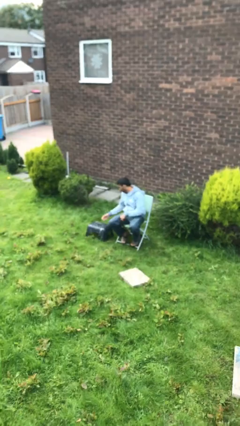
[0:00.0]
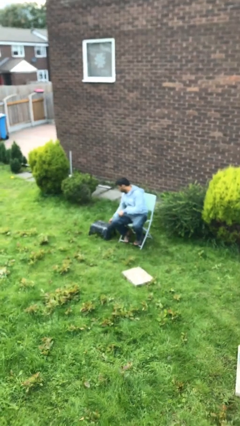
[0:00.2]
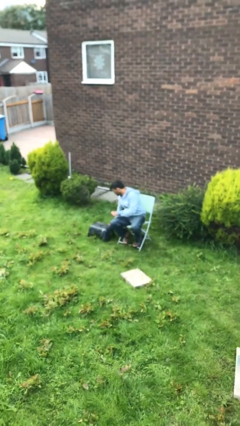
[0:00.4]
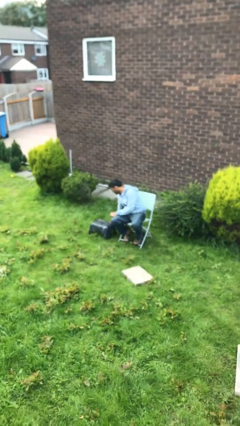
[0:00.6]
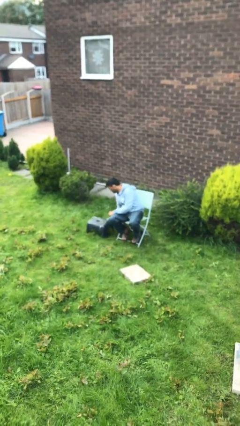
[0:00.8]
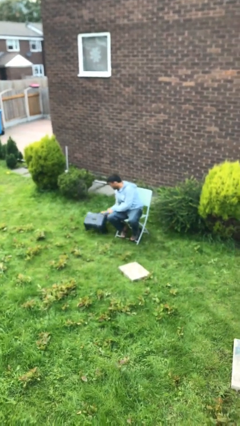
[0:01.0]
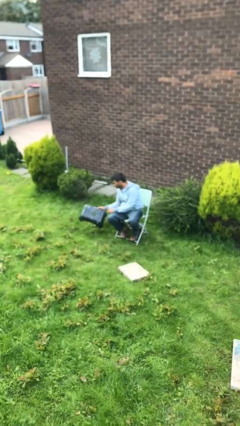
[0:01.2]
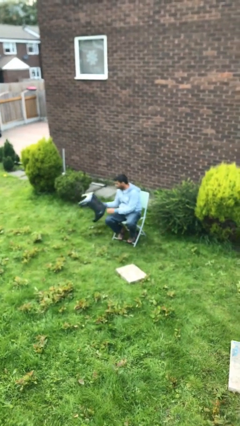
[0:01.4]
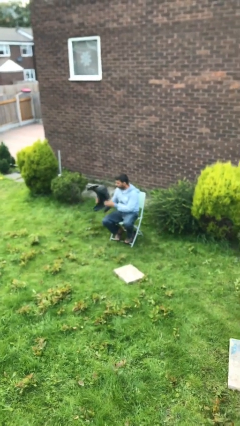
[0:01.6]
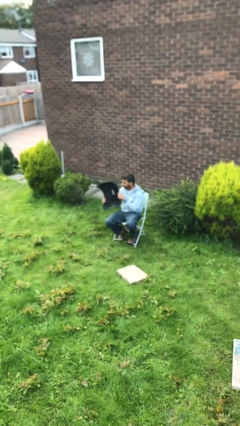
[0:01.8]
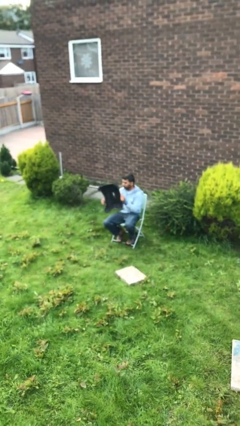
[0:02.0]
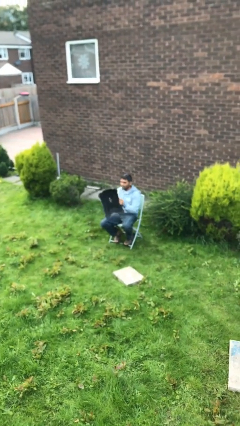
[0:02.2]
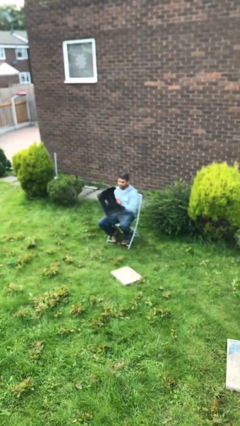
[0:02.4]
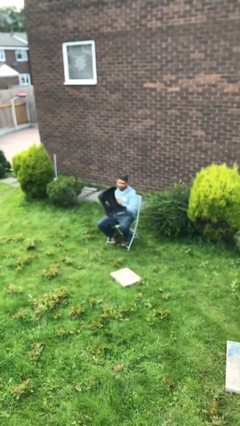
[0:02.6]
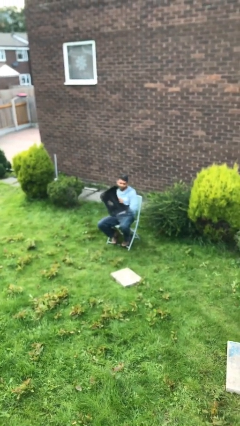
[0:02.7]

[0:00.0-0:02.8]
person picks up object from floor

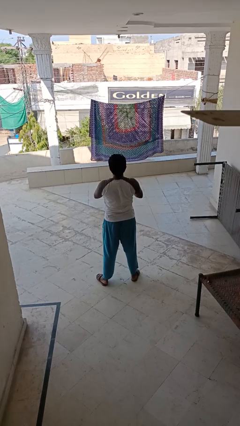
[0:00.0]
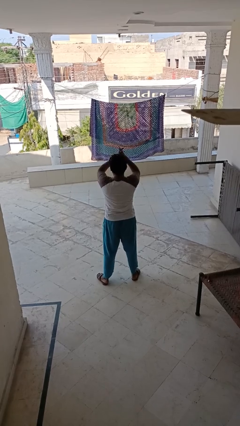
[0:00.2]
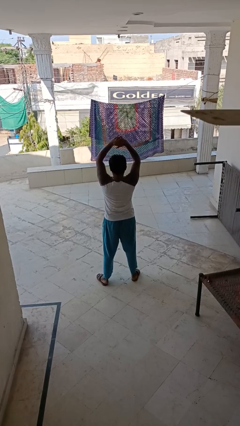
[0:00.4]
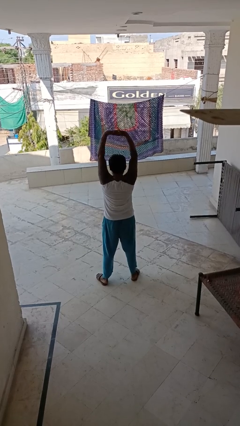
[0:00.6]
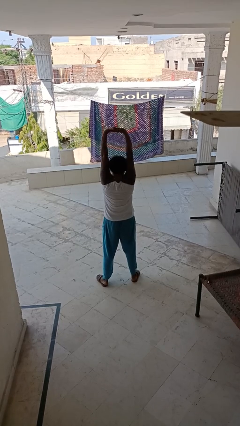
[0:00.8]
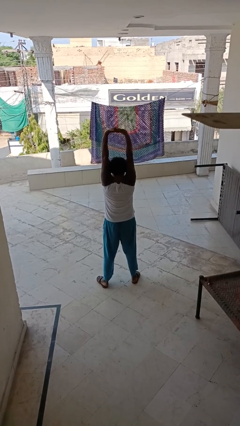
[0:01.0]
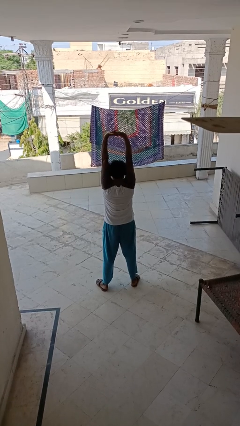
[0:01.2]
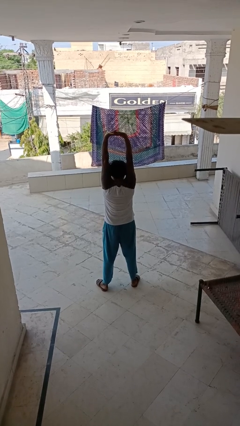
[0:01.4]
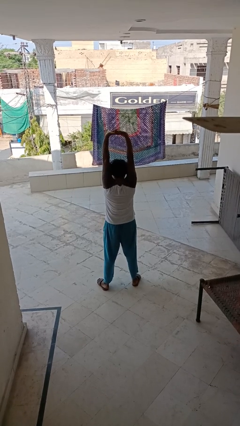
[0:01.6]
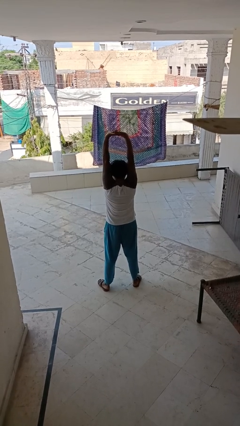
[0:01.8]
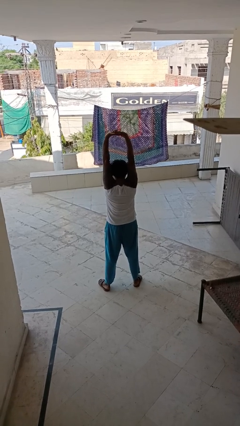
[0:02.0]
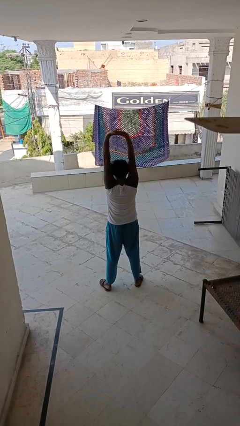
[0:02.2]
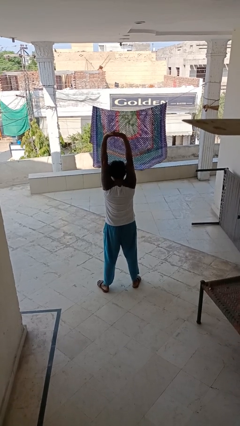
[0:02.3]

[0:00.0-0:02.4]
person stretches arms over head

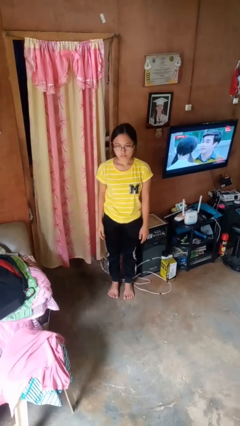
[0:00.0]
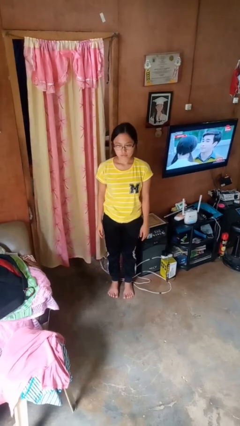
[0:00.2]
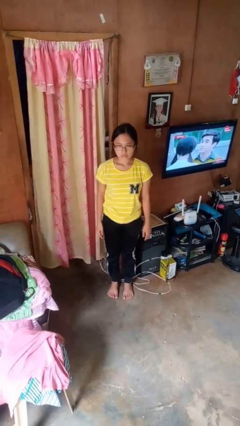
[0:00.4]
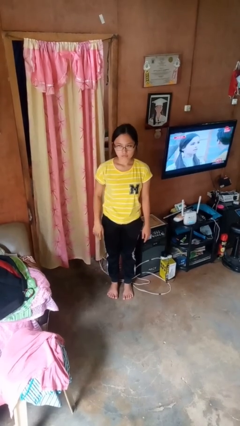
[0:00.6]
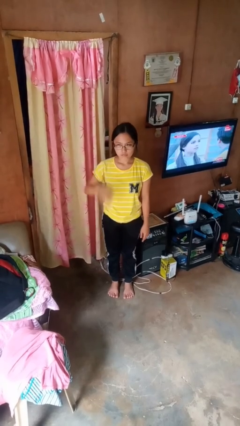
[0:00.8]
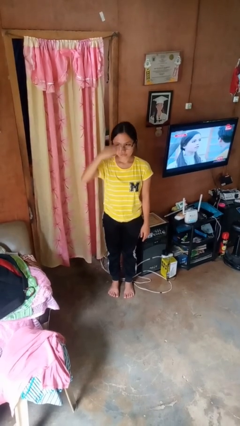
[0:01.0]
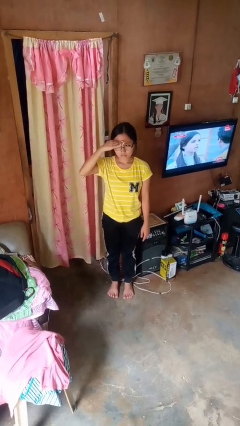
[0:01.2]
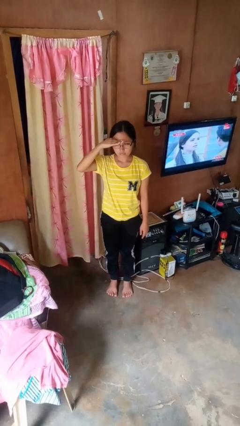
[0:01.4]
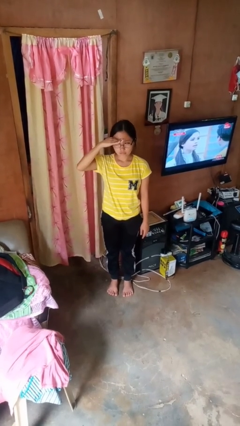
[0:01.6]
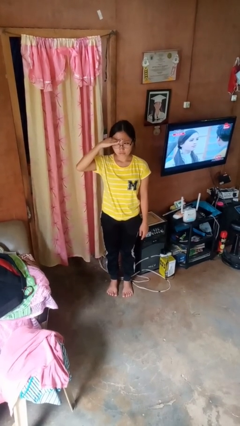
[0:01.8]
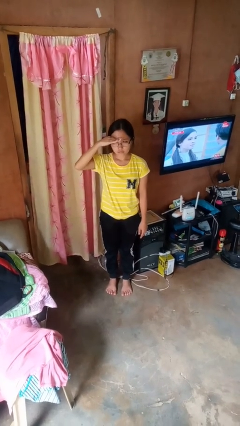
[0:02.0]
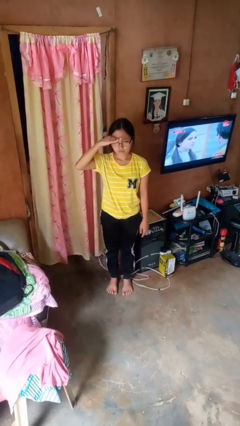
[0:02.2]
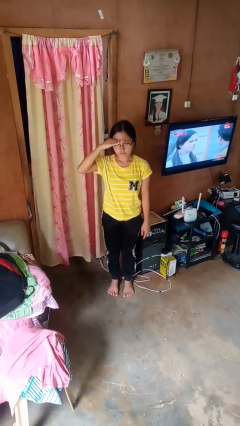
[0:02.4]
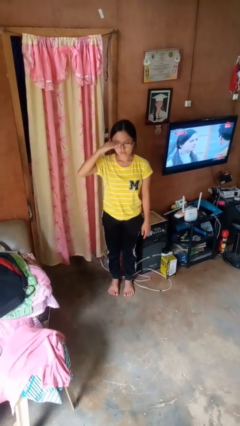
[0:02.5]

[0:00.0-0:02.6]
person salutes

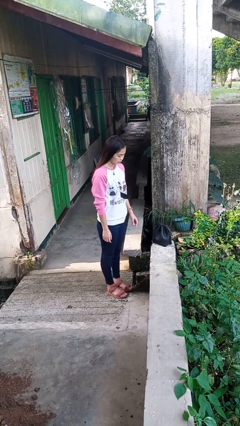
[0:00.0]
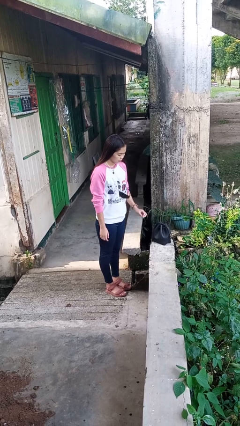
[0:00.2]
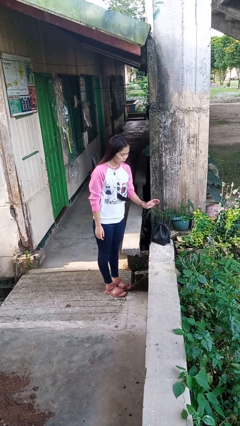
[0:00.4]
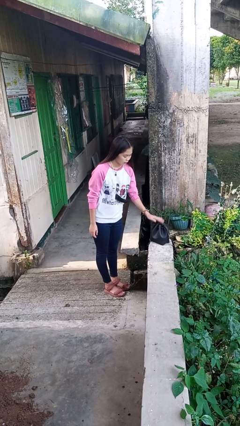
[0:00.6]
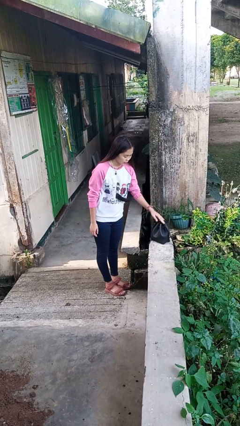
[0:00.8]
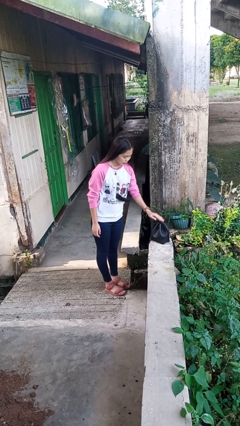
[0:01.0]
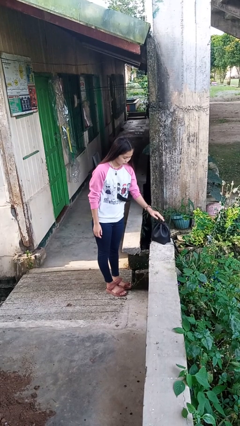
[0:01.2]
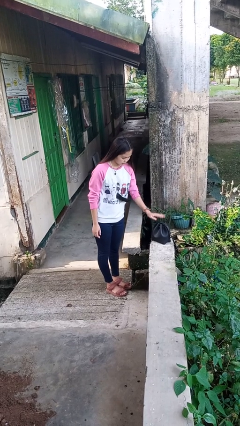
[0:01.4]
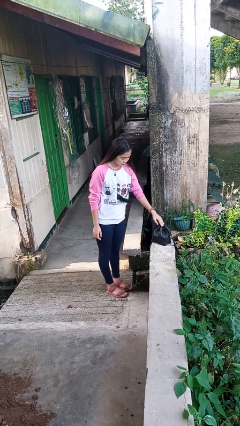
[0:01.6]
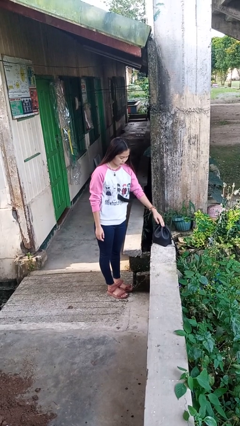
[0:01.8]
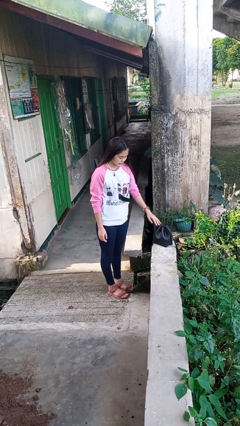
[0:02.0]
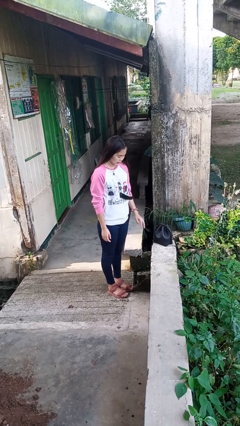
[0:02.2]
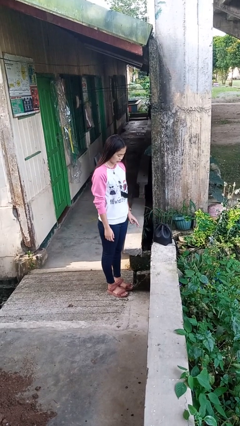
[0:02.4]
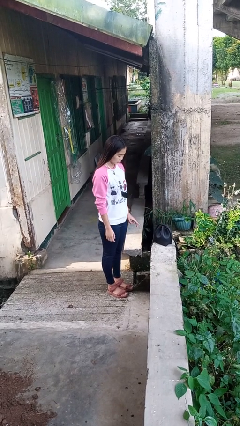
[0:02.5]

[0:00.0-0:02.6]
person taps object with finger

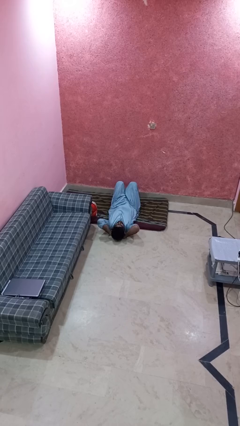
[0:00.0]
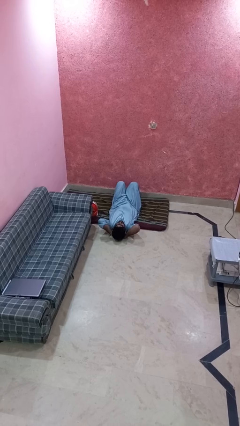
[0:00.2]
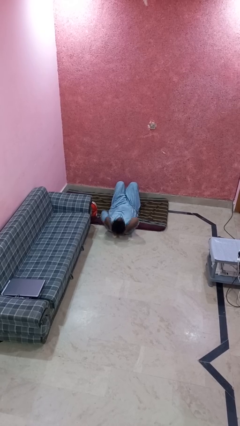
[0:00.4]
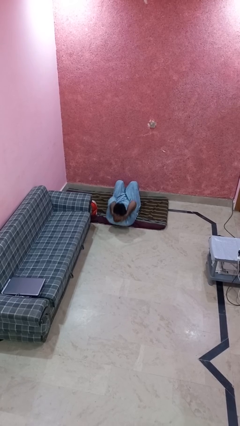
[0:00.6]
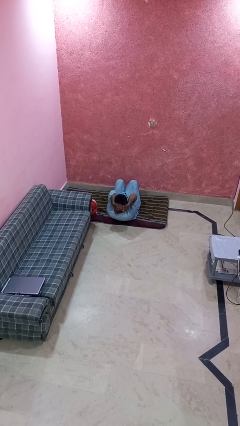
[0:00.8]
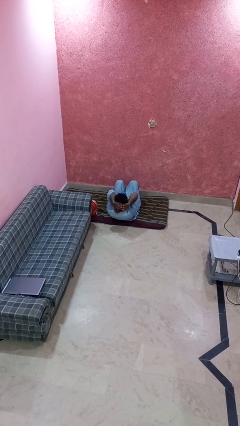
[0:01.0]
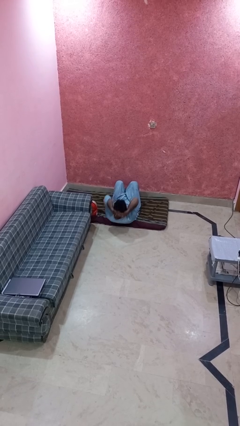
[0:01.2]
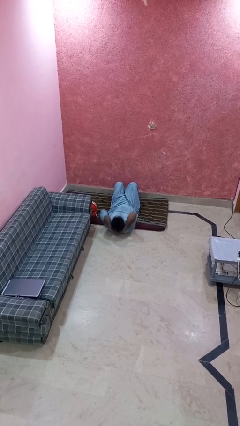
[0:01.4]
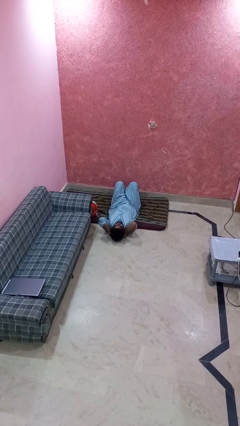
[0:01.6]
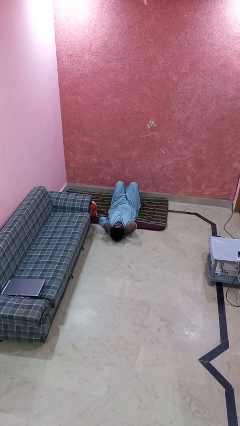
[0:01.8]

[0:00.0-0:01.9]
person exercises with situp

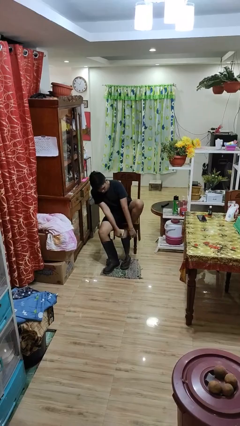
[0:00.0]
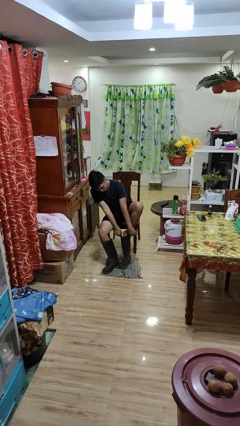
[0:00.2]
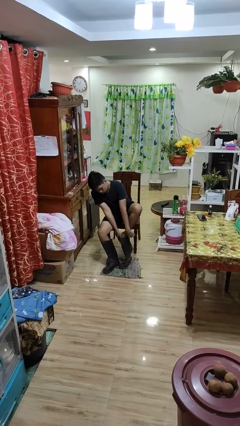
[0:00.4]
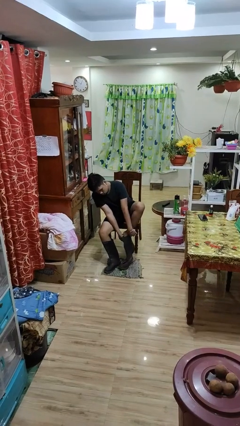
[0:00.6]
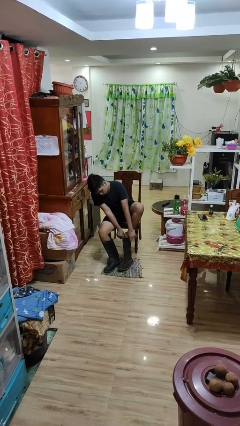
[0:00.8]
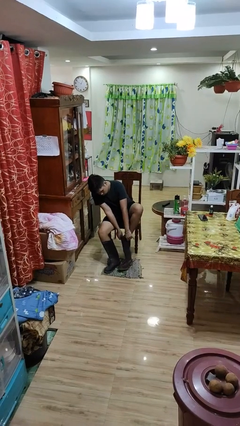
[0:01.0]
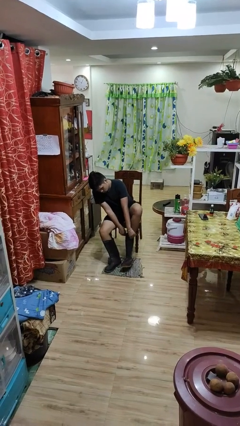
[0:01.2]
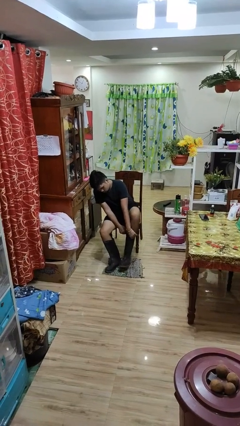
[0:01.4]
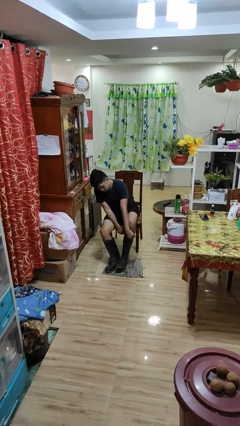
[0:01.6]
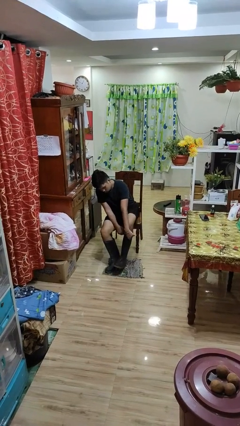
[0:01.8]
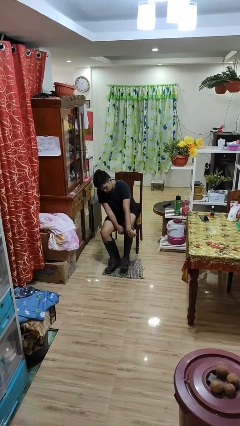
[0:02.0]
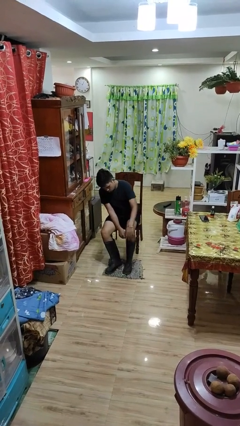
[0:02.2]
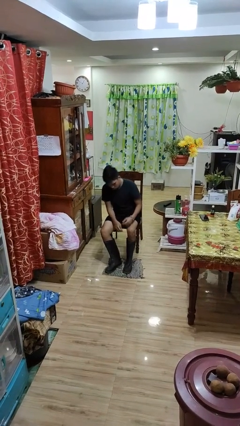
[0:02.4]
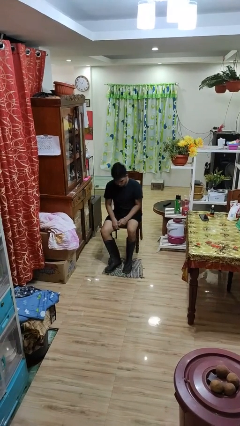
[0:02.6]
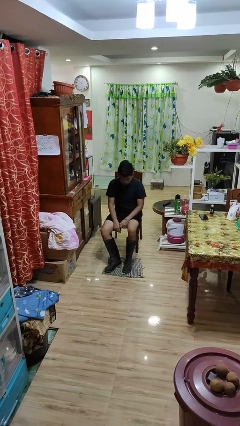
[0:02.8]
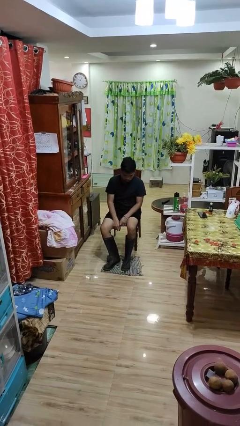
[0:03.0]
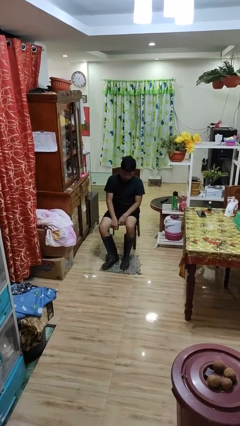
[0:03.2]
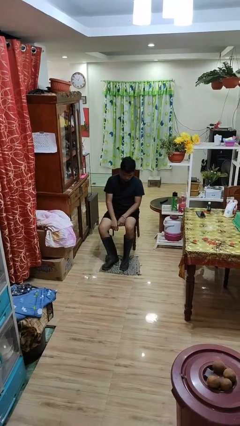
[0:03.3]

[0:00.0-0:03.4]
person uses television remote

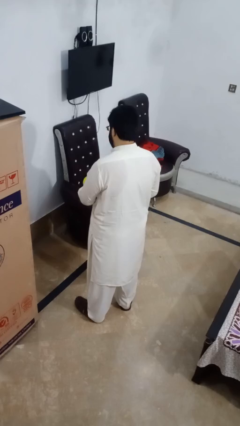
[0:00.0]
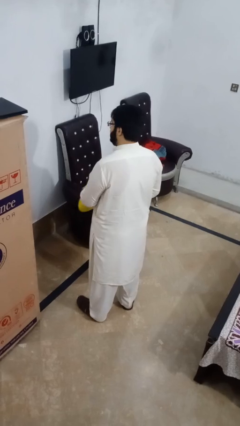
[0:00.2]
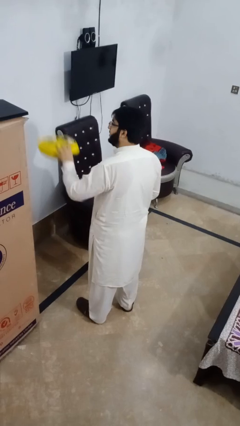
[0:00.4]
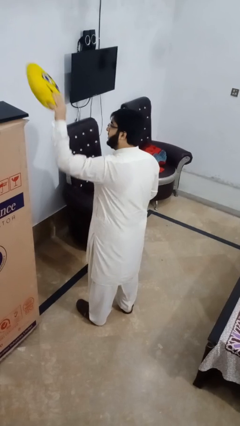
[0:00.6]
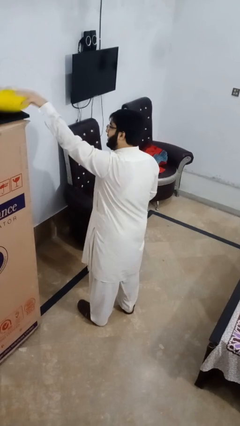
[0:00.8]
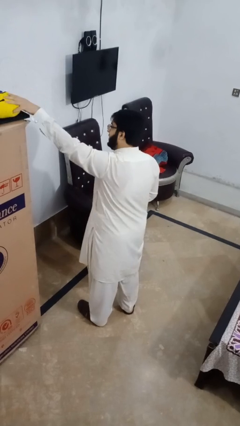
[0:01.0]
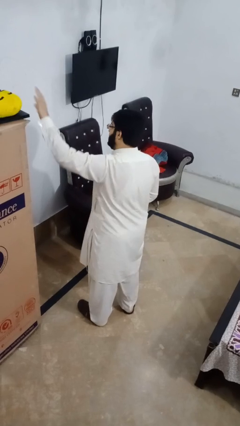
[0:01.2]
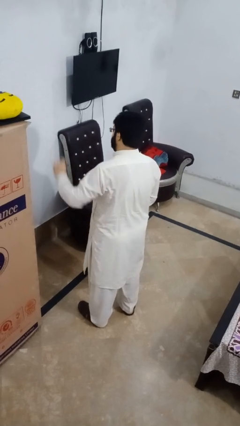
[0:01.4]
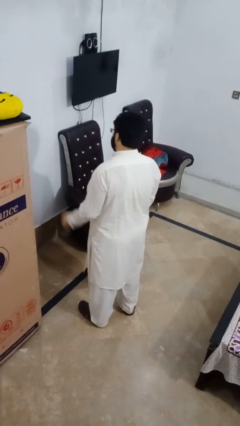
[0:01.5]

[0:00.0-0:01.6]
person puts down object on shelf
